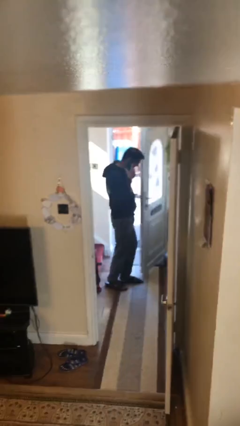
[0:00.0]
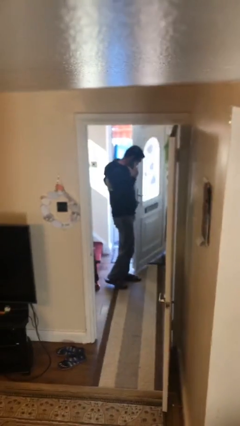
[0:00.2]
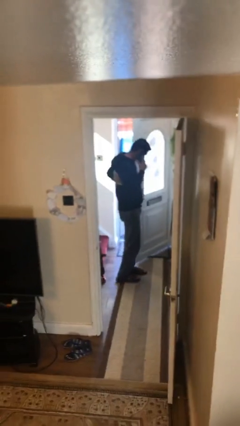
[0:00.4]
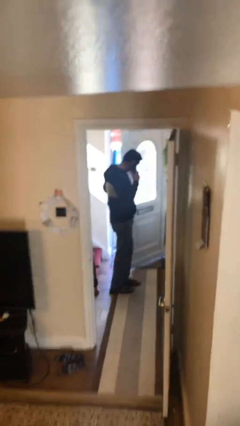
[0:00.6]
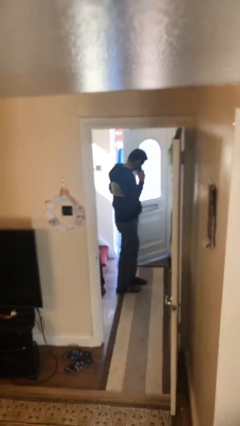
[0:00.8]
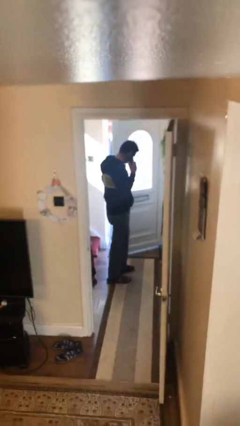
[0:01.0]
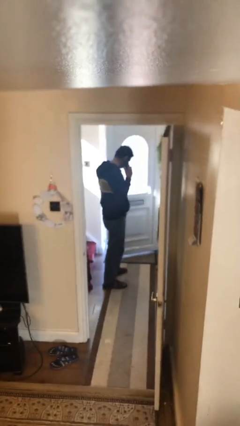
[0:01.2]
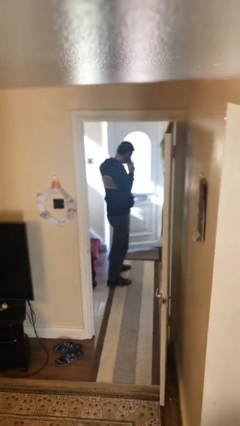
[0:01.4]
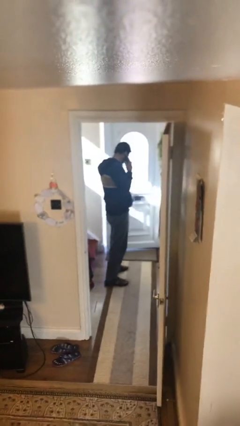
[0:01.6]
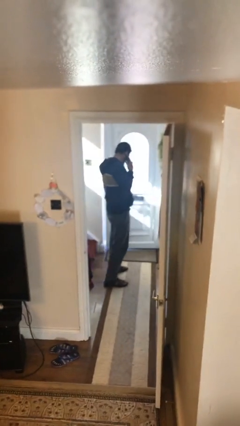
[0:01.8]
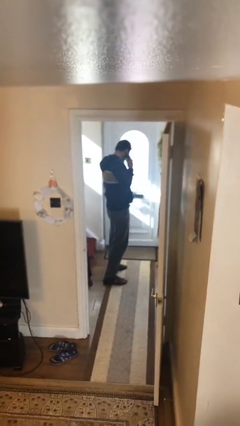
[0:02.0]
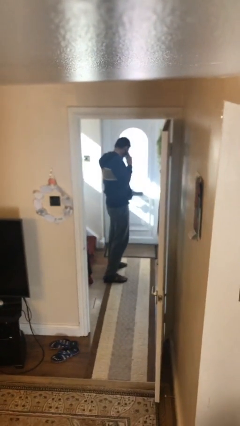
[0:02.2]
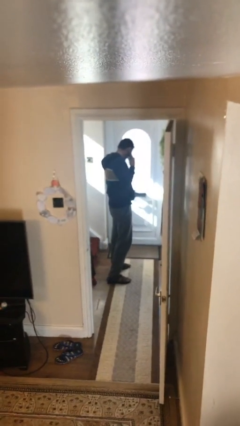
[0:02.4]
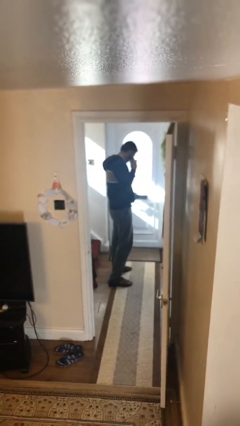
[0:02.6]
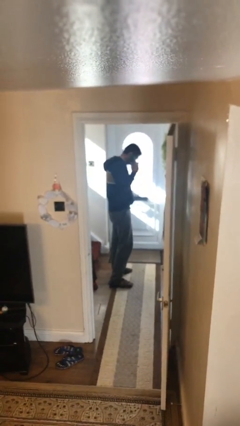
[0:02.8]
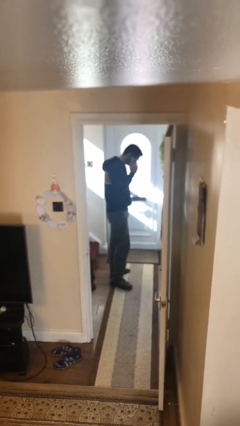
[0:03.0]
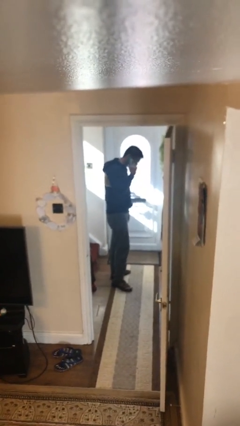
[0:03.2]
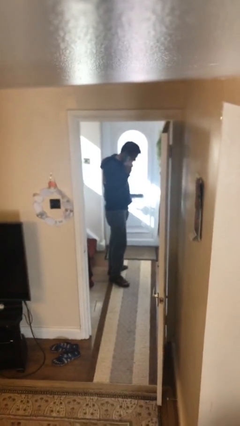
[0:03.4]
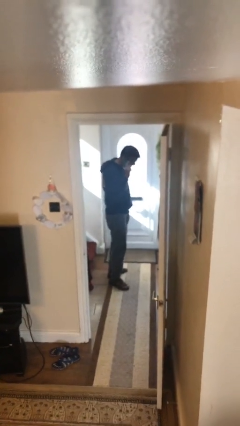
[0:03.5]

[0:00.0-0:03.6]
person closes facility door

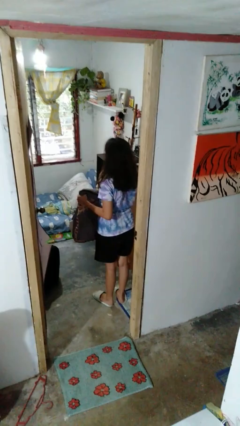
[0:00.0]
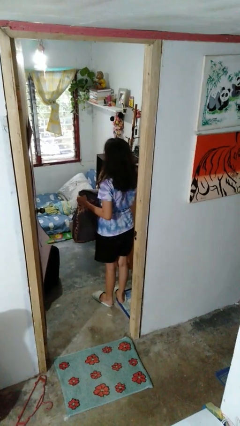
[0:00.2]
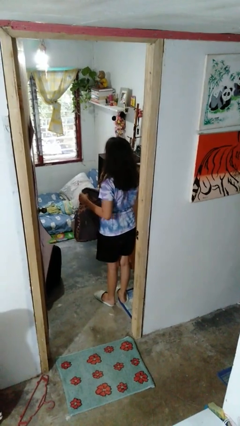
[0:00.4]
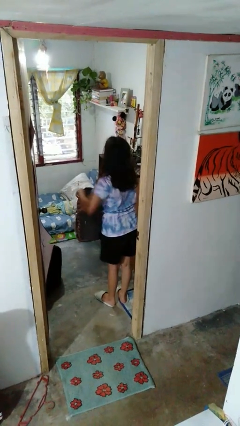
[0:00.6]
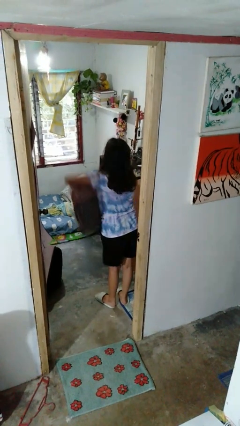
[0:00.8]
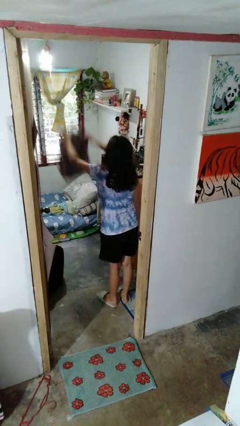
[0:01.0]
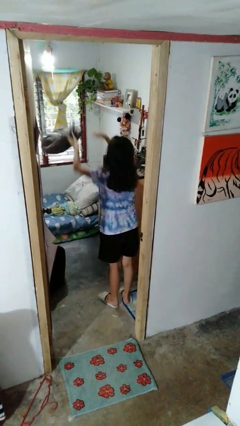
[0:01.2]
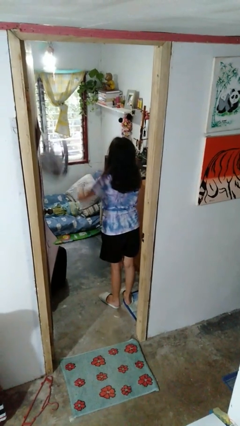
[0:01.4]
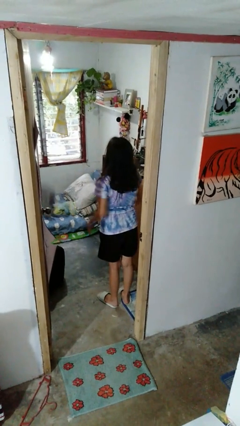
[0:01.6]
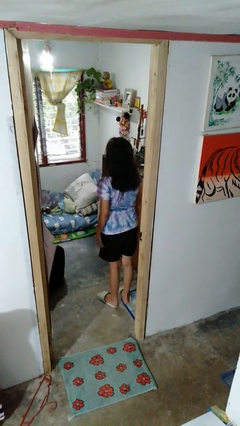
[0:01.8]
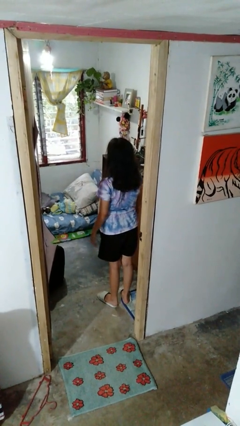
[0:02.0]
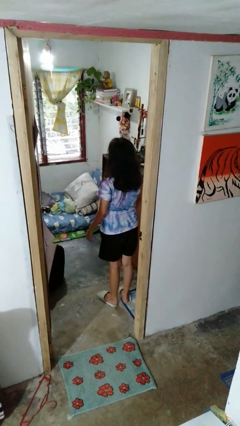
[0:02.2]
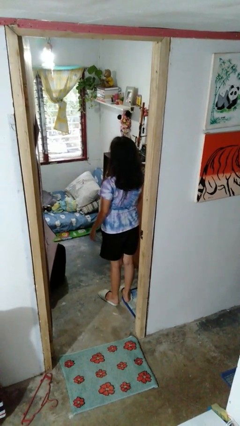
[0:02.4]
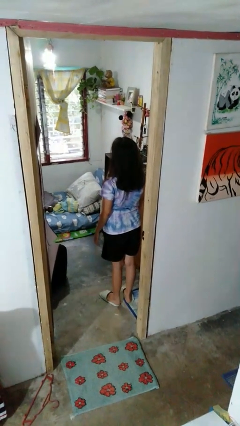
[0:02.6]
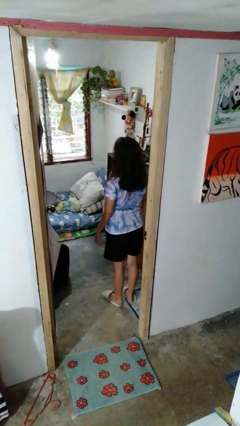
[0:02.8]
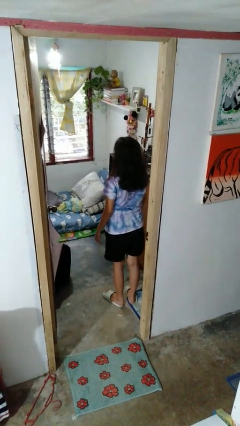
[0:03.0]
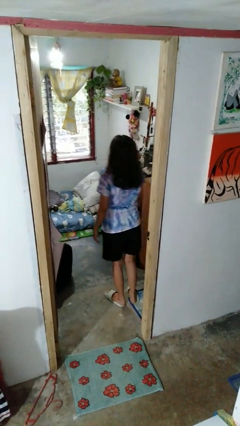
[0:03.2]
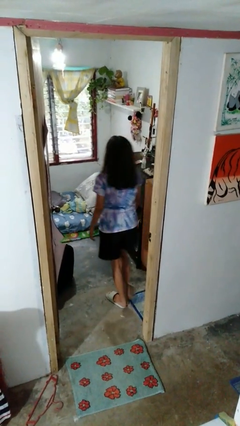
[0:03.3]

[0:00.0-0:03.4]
person throws object on bed

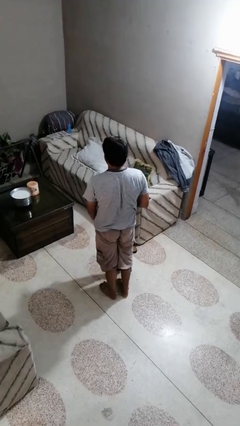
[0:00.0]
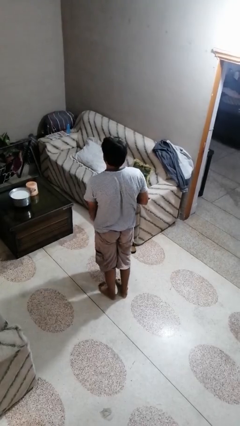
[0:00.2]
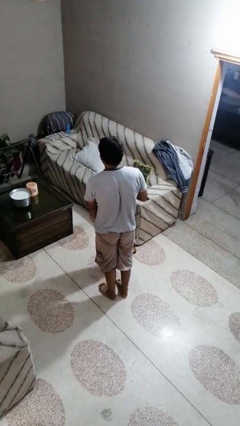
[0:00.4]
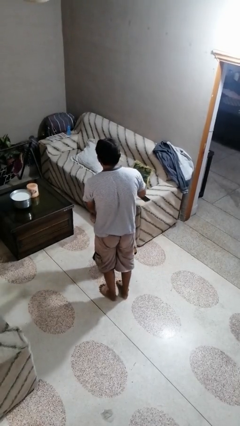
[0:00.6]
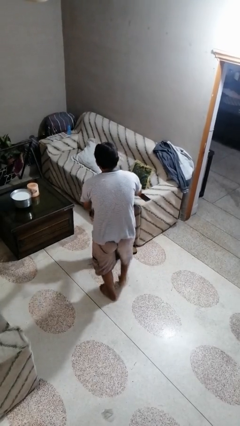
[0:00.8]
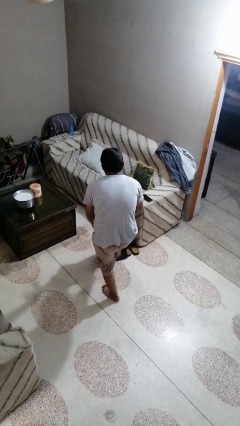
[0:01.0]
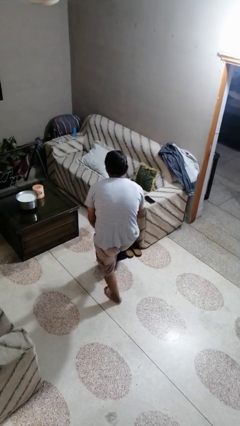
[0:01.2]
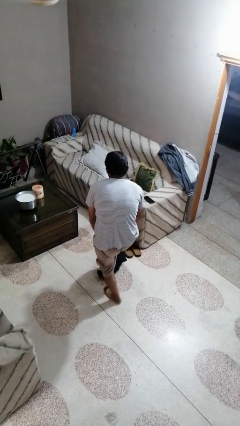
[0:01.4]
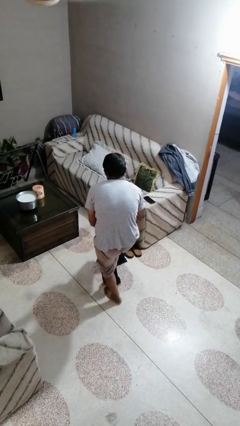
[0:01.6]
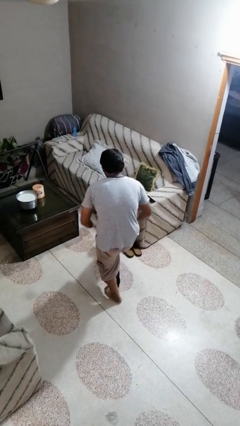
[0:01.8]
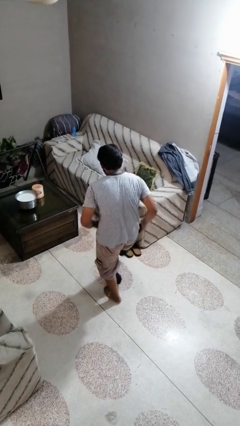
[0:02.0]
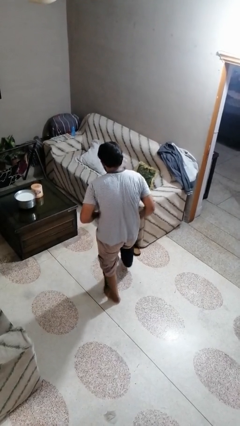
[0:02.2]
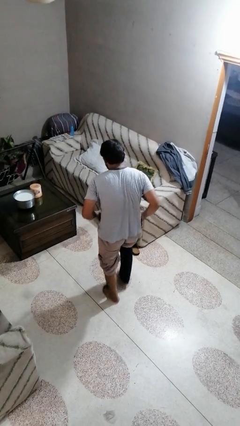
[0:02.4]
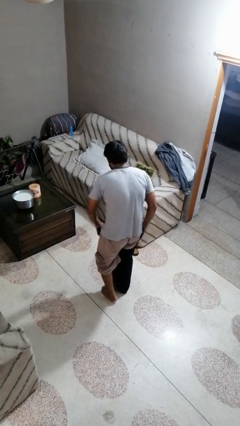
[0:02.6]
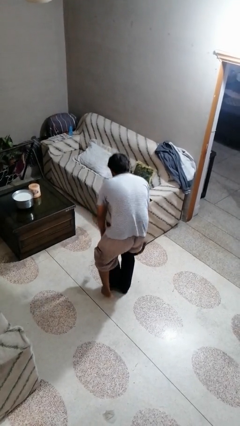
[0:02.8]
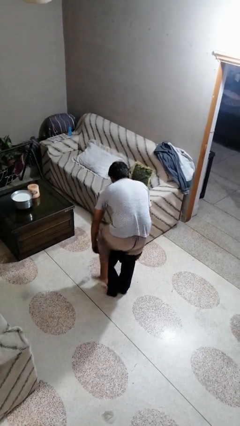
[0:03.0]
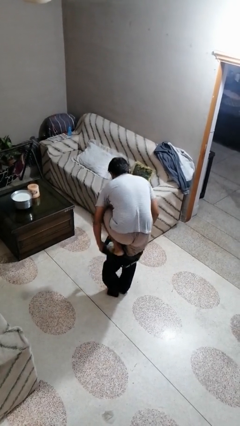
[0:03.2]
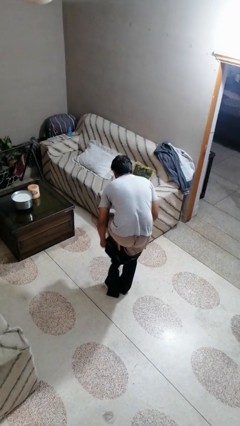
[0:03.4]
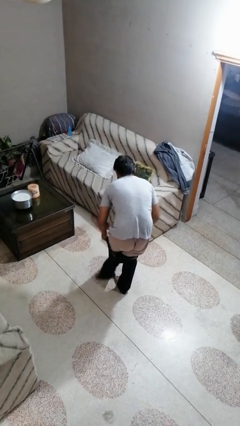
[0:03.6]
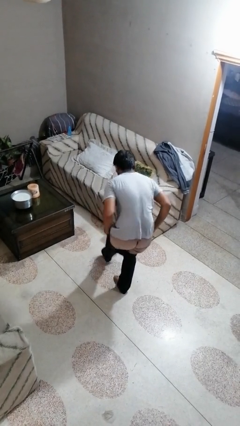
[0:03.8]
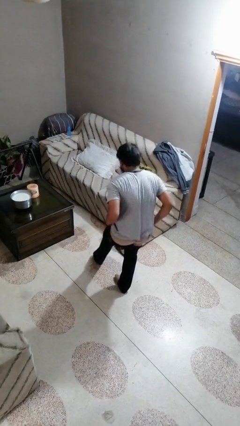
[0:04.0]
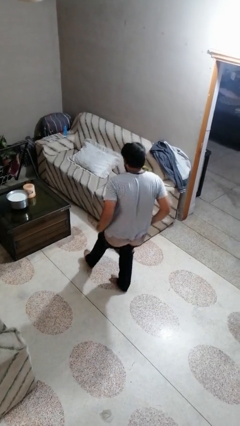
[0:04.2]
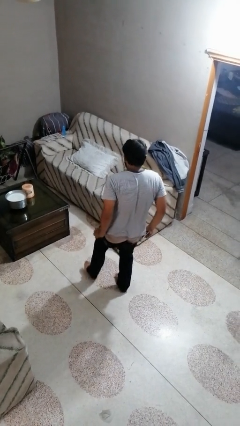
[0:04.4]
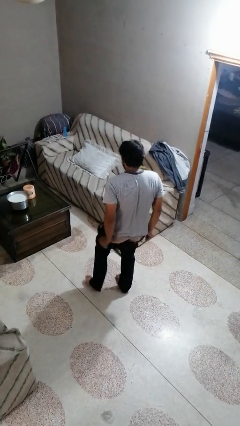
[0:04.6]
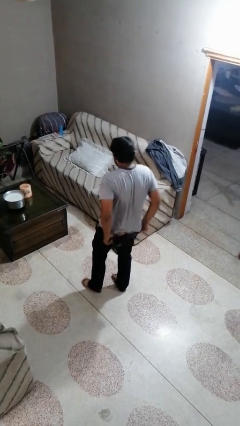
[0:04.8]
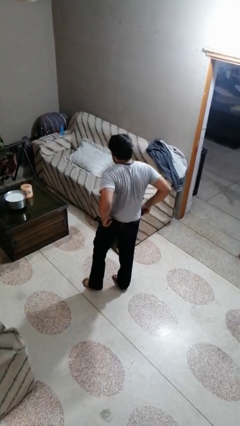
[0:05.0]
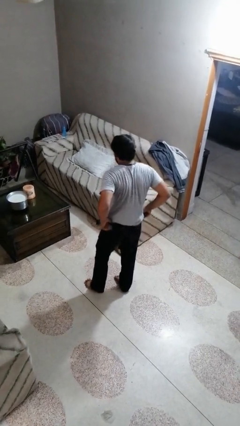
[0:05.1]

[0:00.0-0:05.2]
person puts on pants

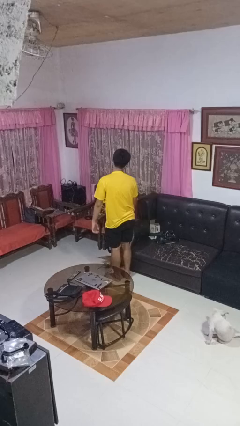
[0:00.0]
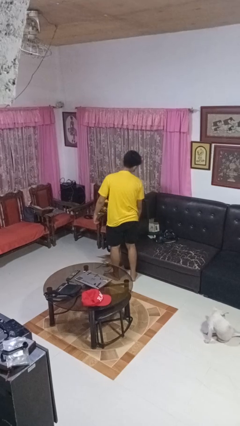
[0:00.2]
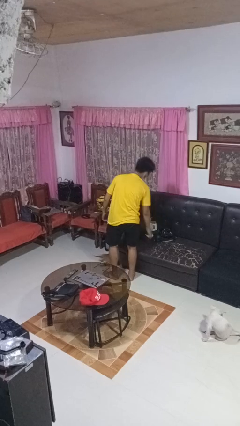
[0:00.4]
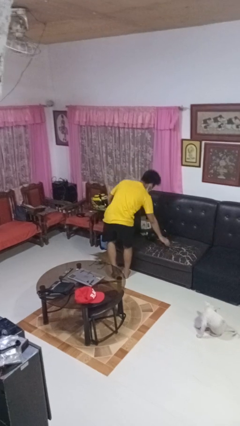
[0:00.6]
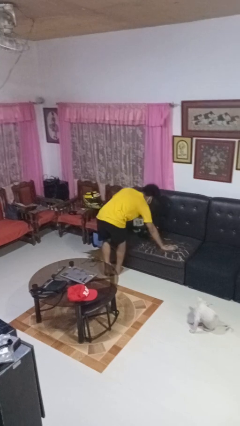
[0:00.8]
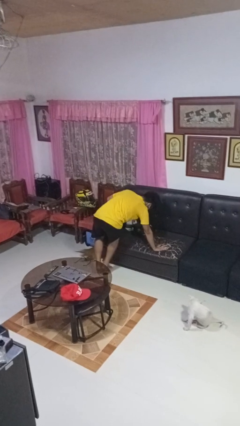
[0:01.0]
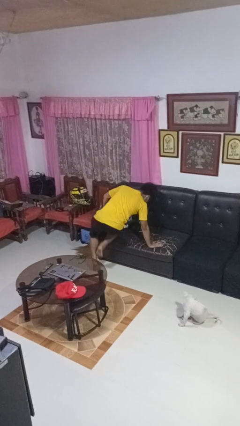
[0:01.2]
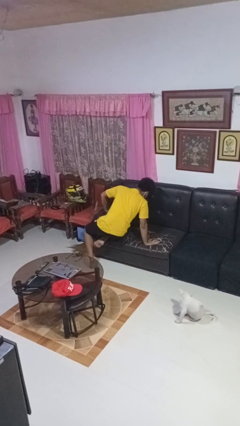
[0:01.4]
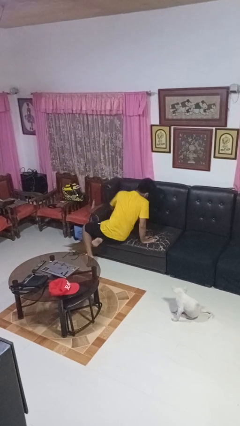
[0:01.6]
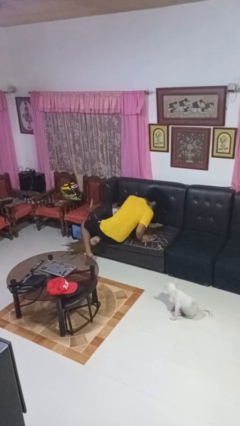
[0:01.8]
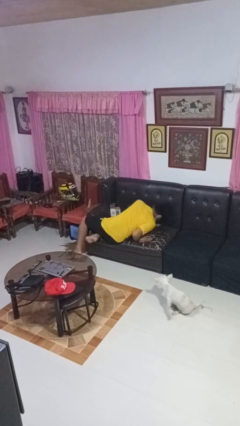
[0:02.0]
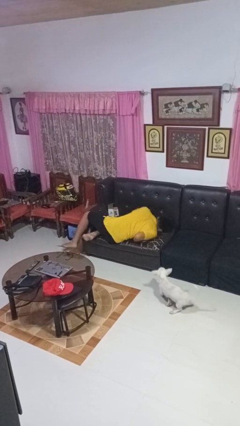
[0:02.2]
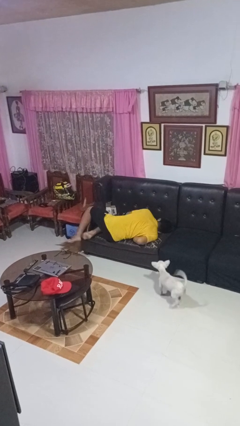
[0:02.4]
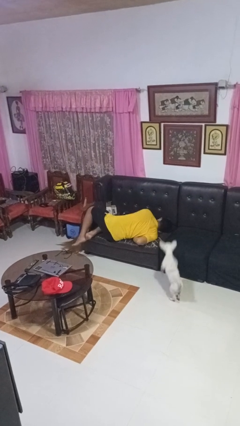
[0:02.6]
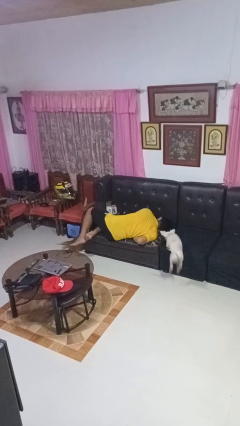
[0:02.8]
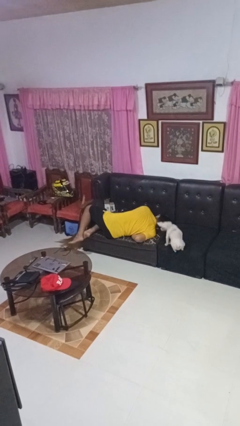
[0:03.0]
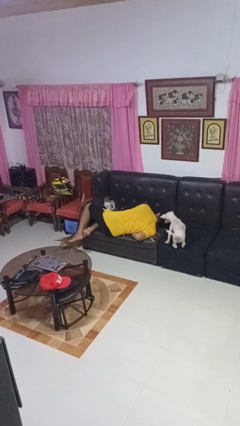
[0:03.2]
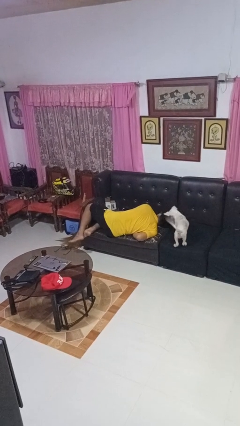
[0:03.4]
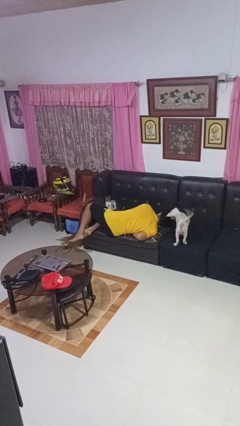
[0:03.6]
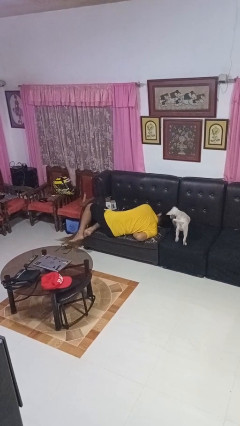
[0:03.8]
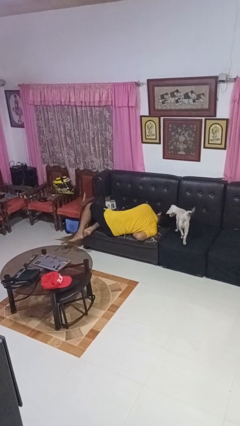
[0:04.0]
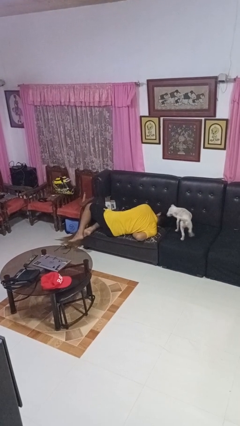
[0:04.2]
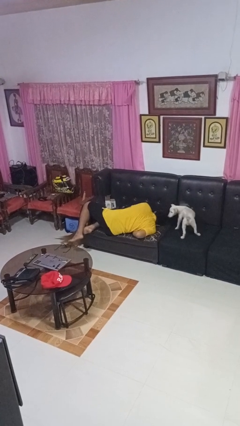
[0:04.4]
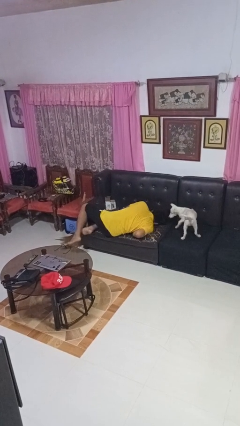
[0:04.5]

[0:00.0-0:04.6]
person lies down on couch

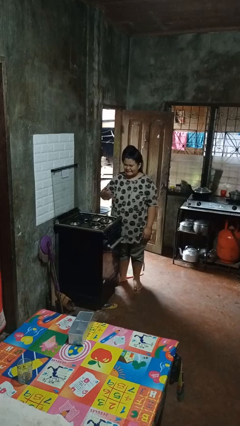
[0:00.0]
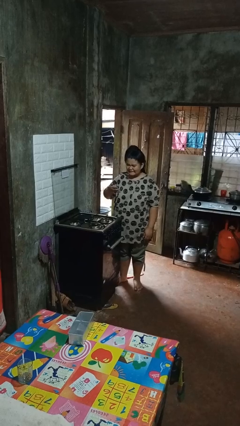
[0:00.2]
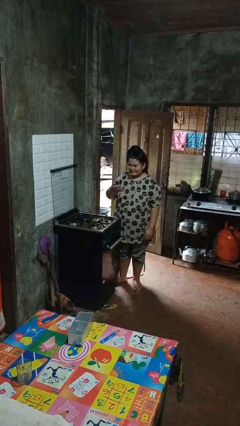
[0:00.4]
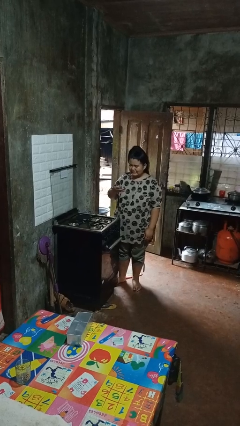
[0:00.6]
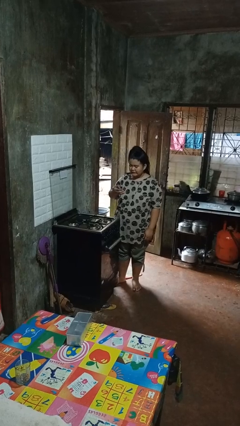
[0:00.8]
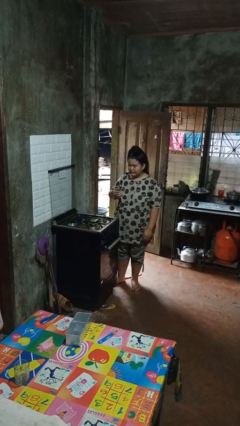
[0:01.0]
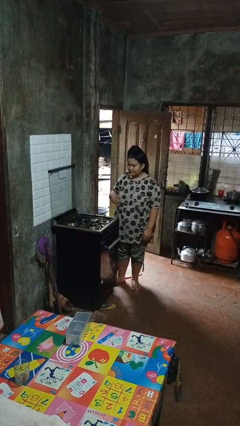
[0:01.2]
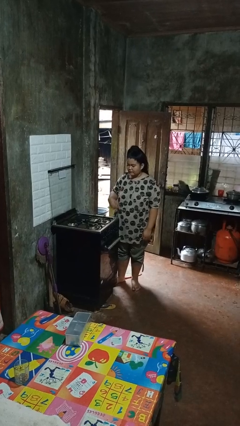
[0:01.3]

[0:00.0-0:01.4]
person burns hand
